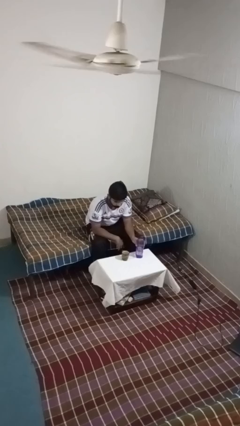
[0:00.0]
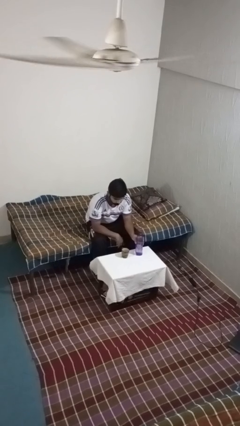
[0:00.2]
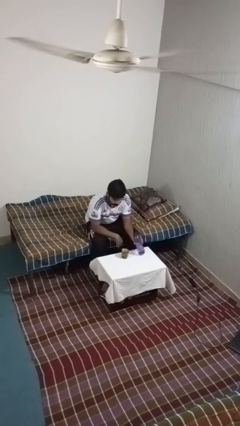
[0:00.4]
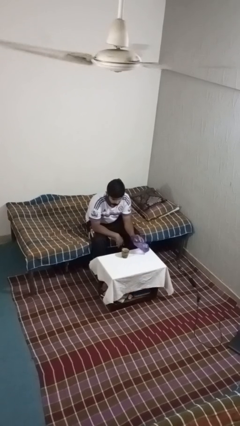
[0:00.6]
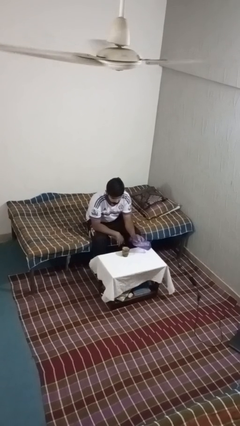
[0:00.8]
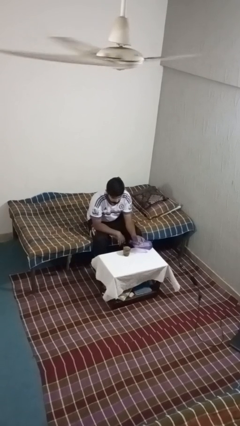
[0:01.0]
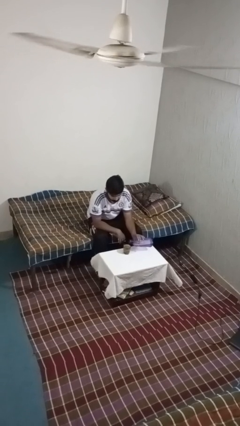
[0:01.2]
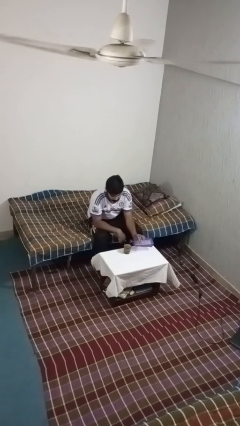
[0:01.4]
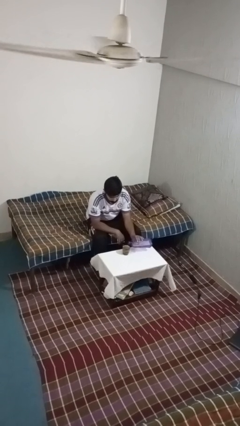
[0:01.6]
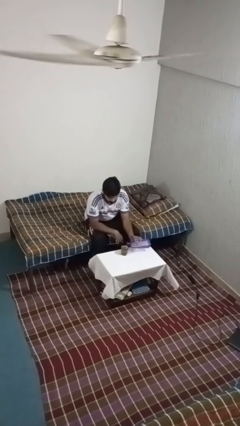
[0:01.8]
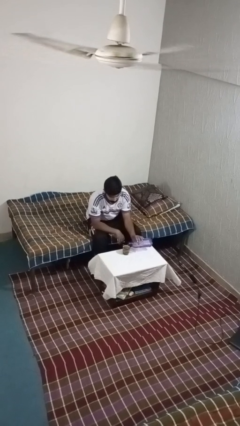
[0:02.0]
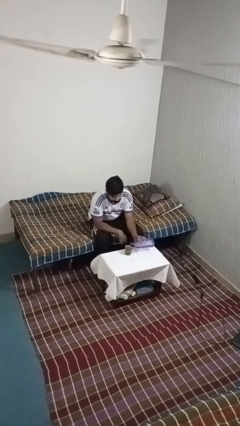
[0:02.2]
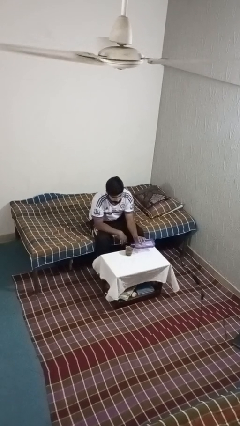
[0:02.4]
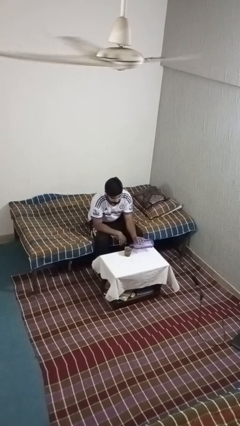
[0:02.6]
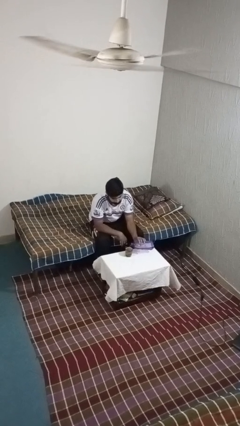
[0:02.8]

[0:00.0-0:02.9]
person pours liquid into cup

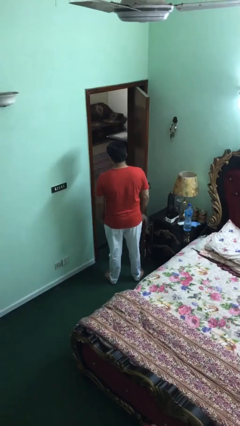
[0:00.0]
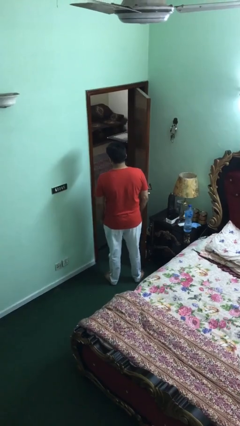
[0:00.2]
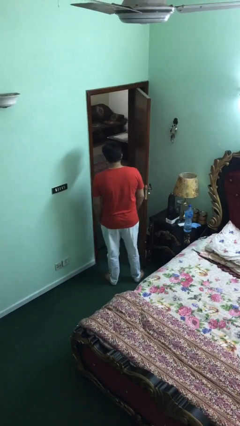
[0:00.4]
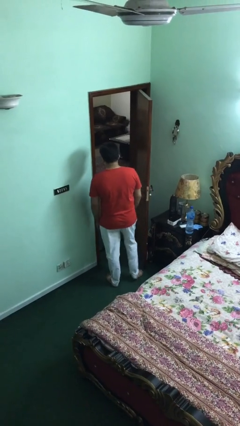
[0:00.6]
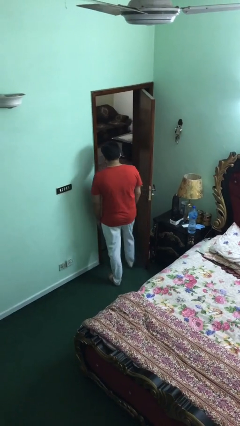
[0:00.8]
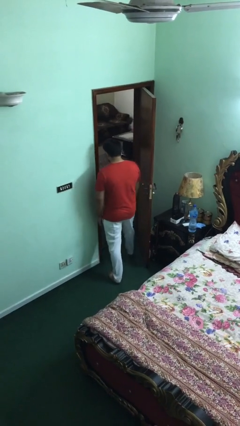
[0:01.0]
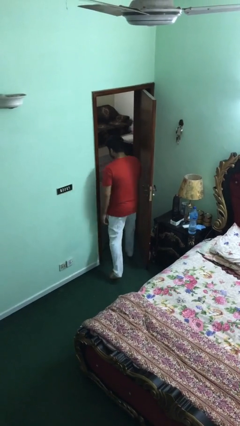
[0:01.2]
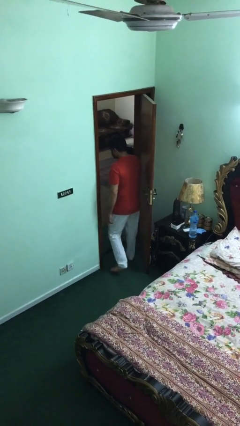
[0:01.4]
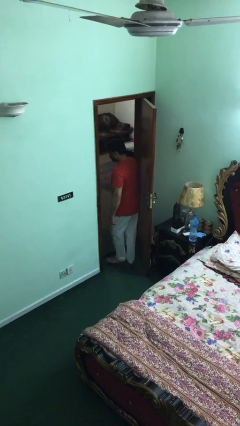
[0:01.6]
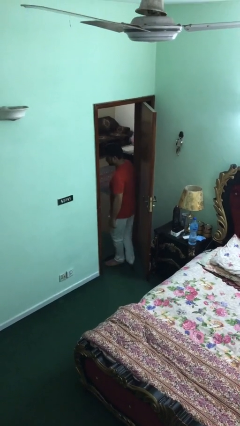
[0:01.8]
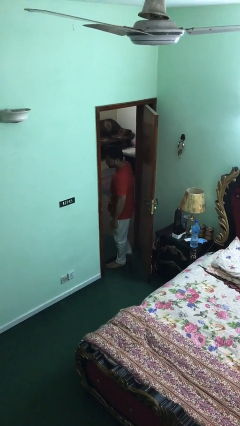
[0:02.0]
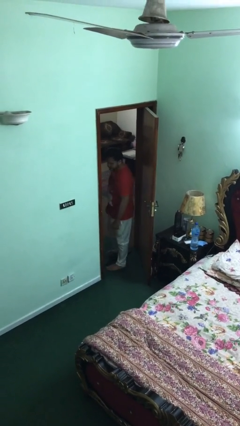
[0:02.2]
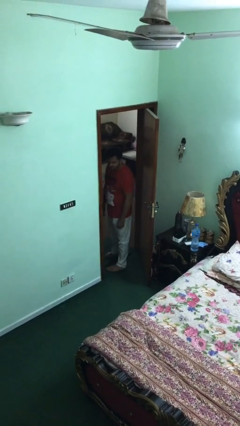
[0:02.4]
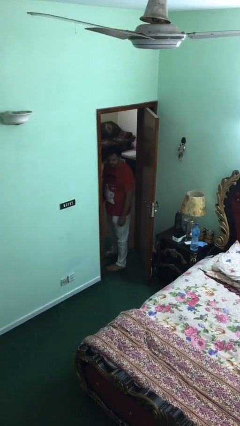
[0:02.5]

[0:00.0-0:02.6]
person exits scene through structure

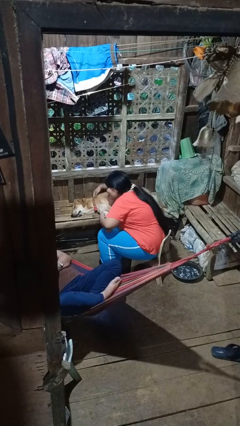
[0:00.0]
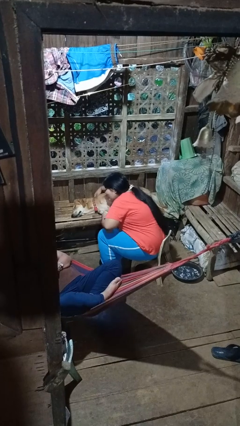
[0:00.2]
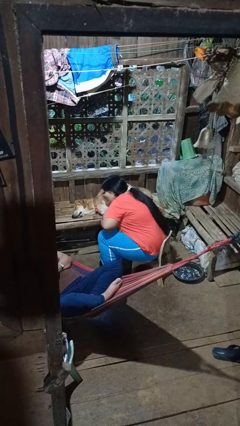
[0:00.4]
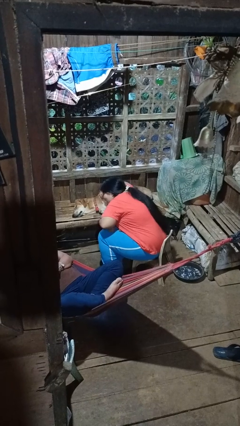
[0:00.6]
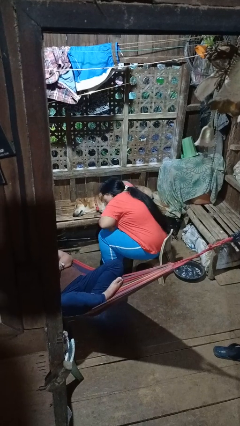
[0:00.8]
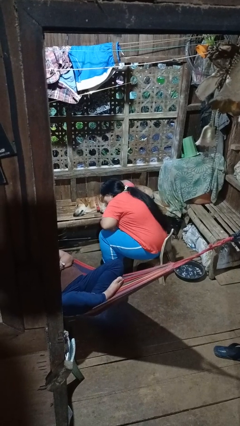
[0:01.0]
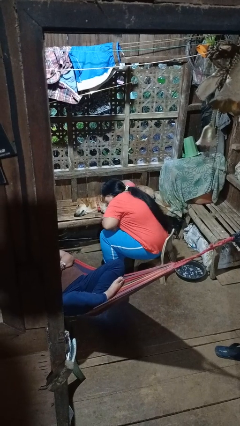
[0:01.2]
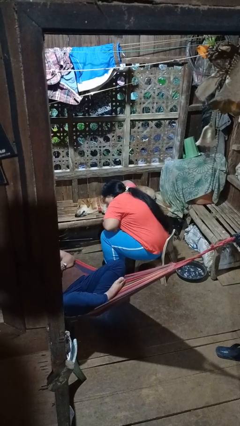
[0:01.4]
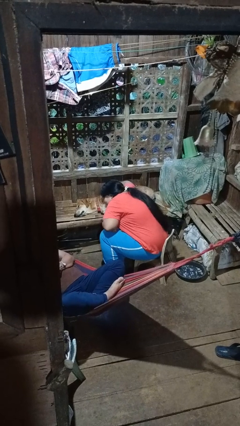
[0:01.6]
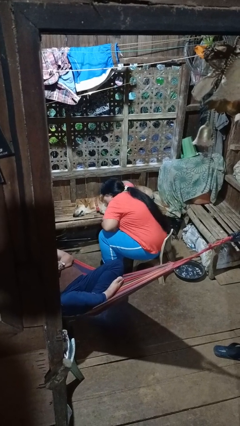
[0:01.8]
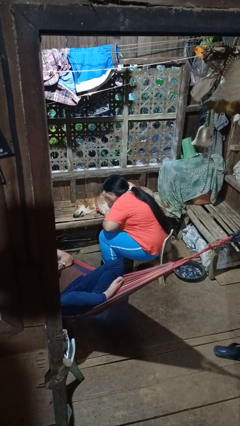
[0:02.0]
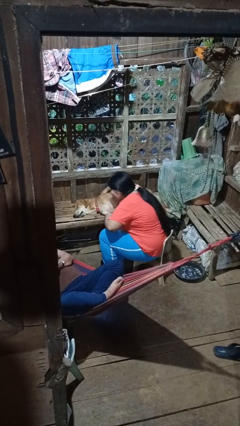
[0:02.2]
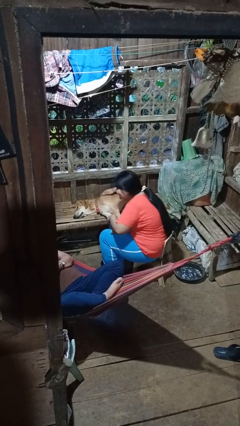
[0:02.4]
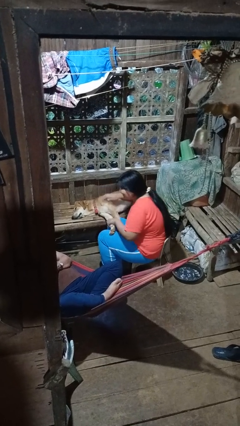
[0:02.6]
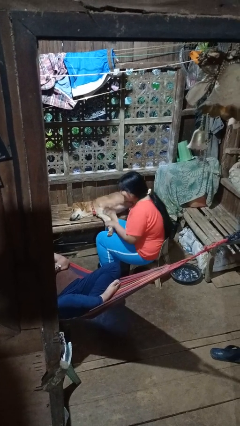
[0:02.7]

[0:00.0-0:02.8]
person hugs dog

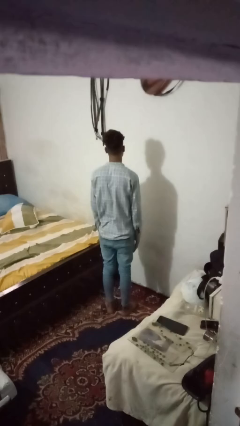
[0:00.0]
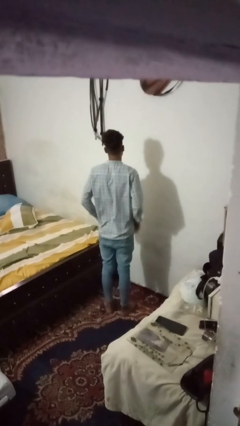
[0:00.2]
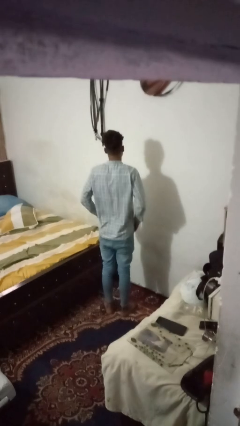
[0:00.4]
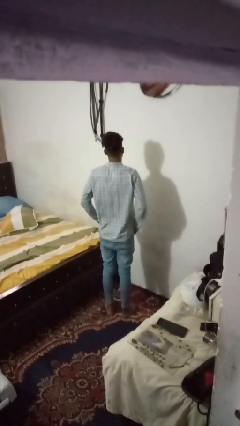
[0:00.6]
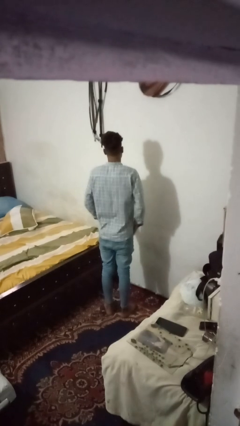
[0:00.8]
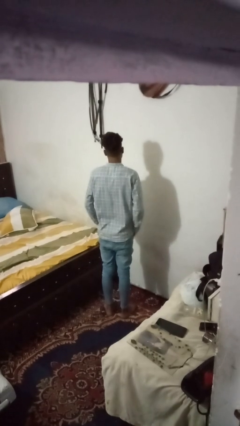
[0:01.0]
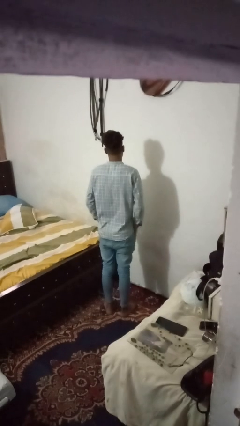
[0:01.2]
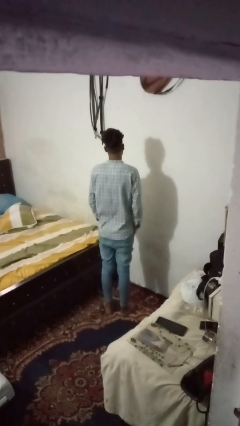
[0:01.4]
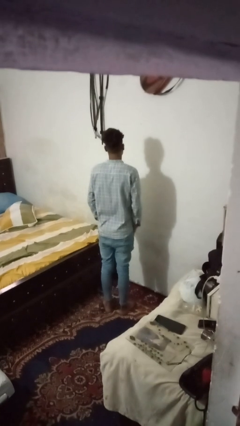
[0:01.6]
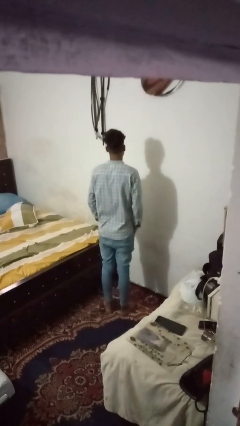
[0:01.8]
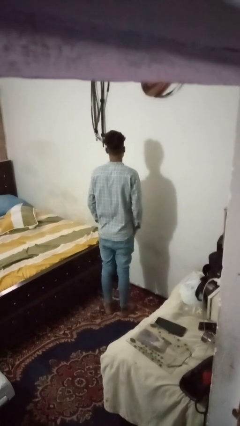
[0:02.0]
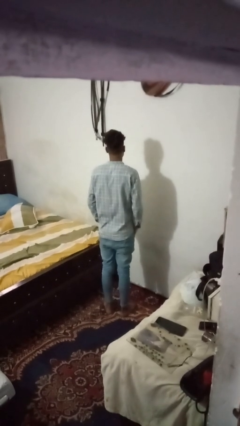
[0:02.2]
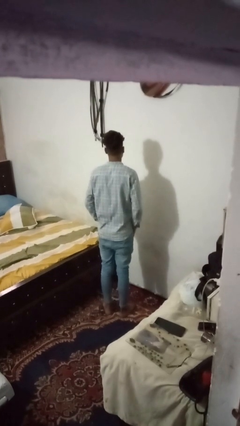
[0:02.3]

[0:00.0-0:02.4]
person puts hands in back pockets

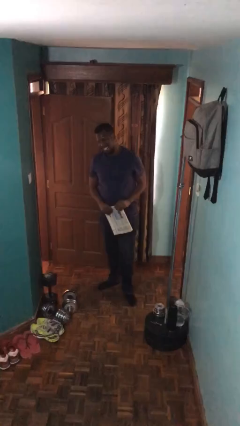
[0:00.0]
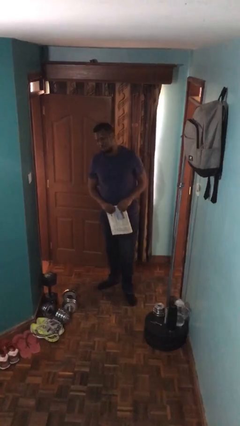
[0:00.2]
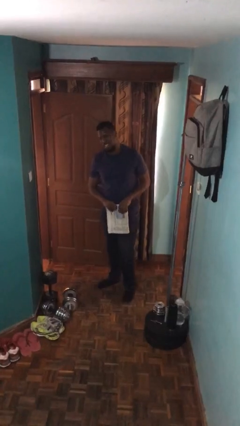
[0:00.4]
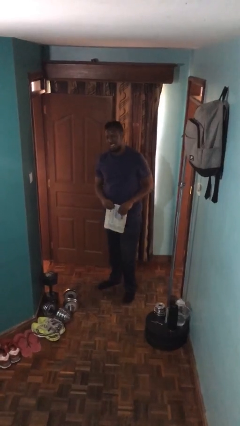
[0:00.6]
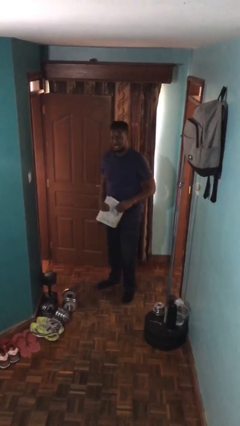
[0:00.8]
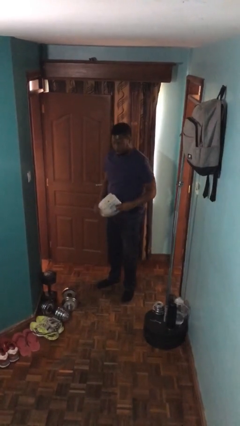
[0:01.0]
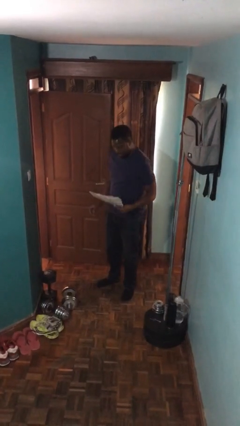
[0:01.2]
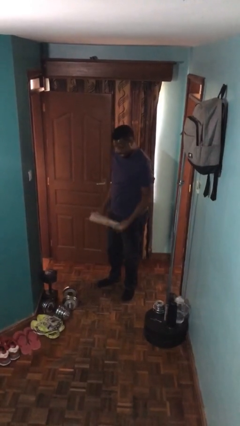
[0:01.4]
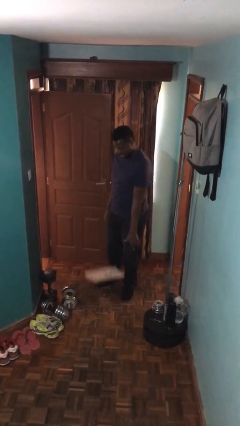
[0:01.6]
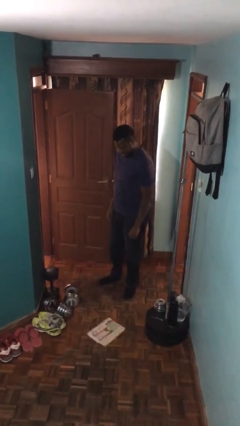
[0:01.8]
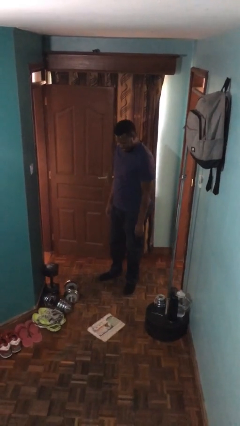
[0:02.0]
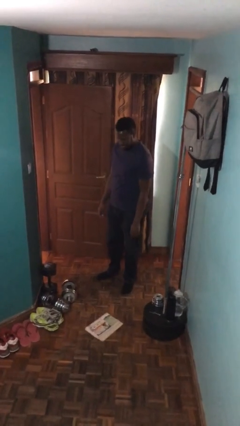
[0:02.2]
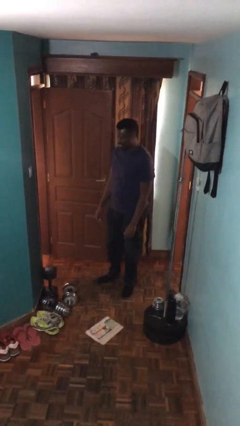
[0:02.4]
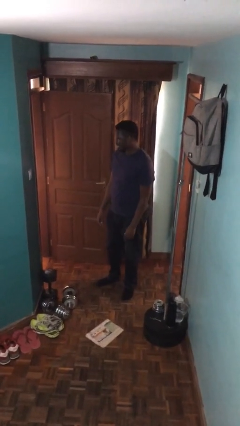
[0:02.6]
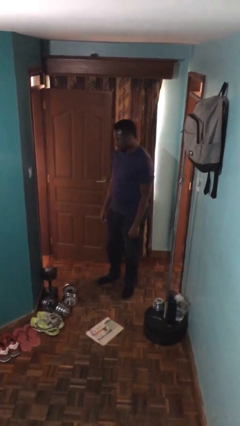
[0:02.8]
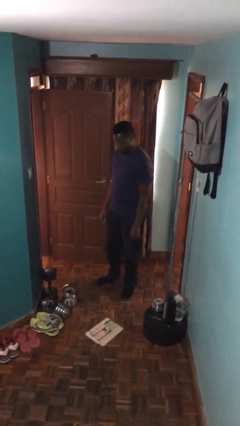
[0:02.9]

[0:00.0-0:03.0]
person drops object

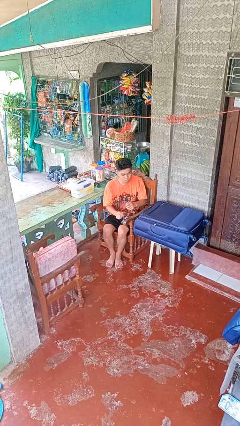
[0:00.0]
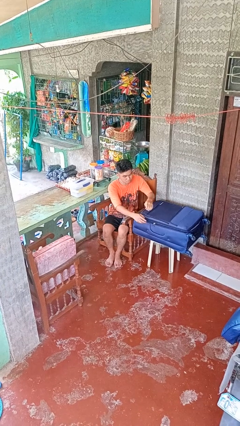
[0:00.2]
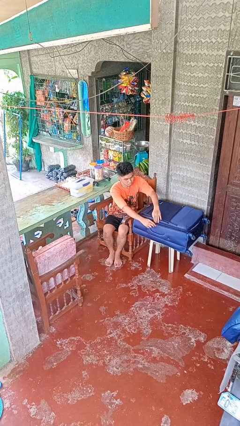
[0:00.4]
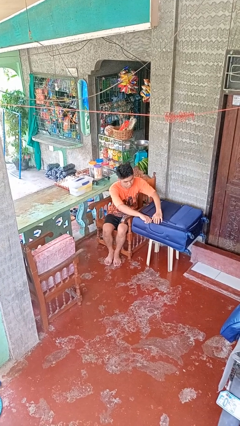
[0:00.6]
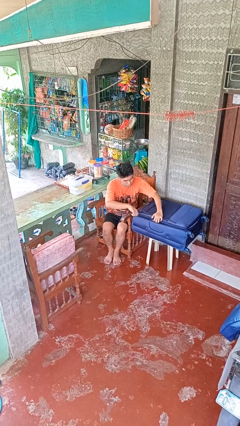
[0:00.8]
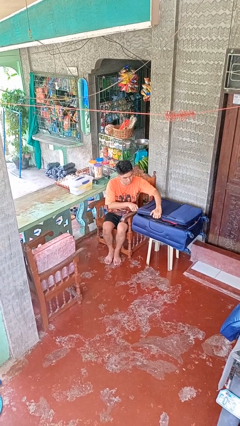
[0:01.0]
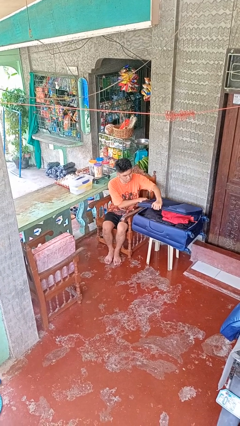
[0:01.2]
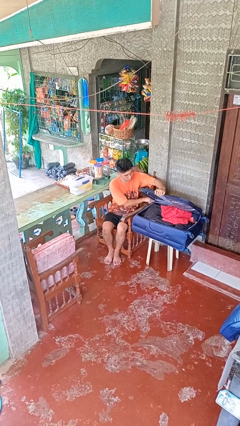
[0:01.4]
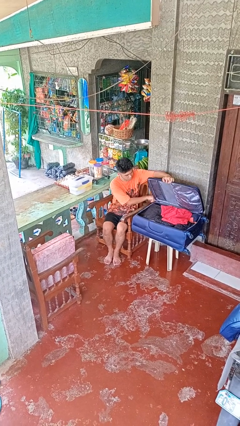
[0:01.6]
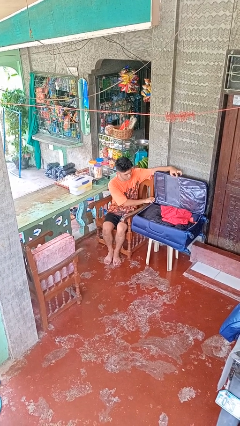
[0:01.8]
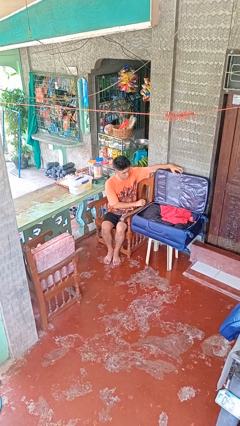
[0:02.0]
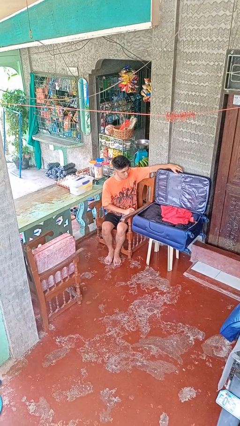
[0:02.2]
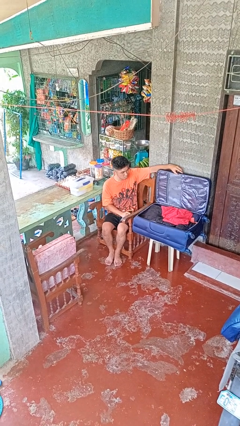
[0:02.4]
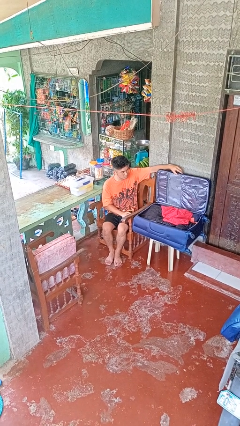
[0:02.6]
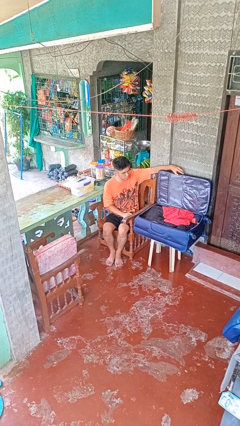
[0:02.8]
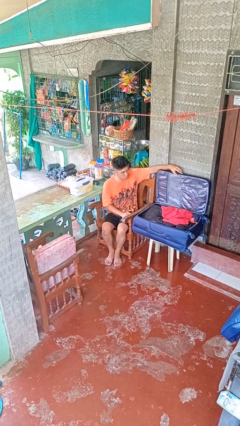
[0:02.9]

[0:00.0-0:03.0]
person opens suitcase

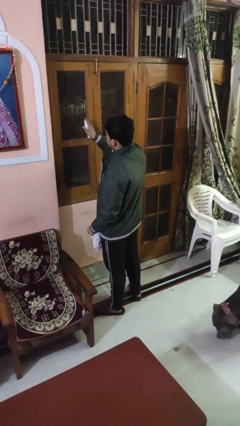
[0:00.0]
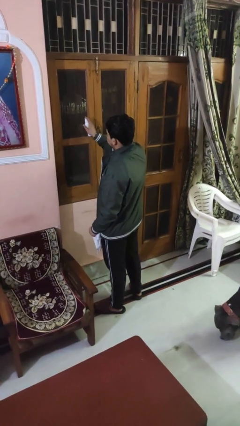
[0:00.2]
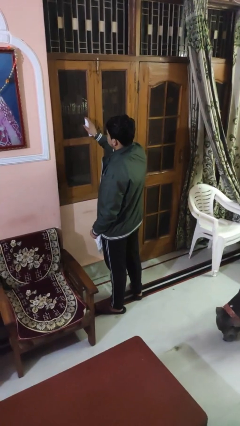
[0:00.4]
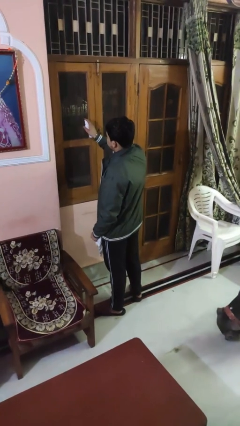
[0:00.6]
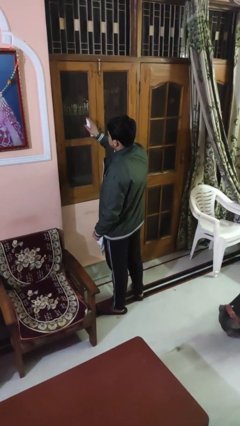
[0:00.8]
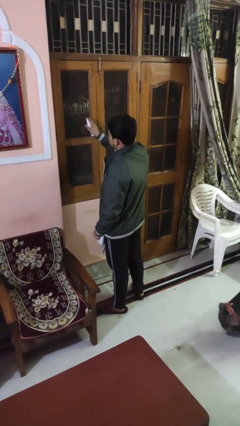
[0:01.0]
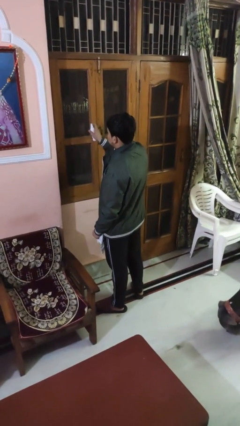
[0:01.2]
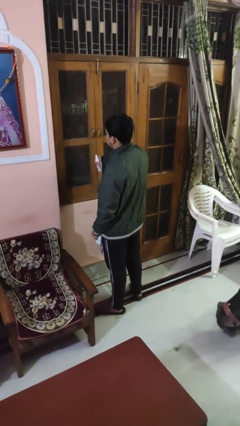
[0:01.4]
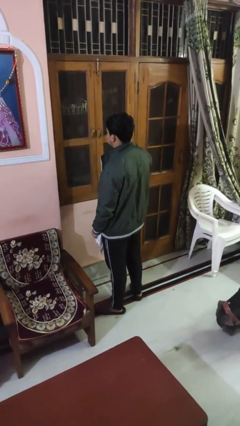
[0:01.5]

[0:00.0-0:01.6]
person sprays from bottle
